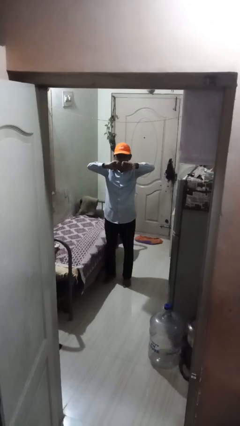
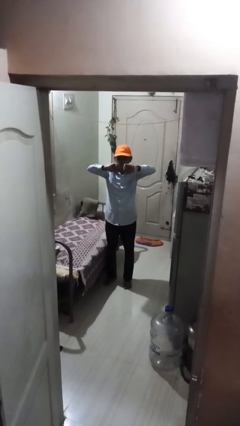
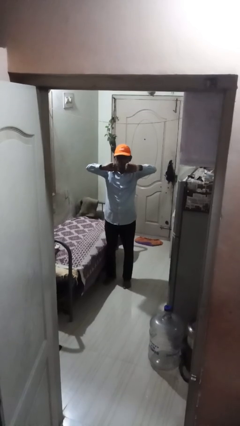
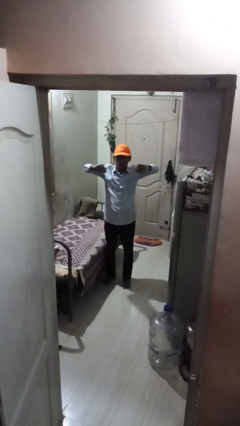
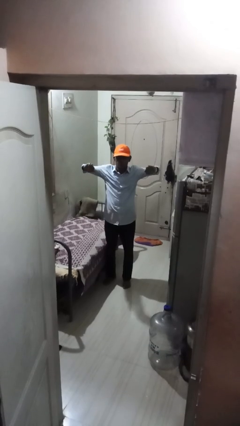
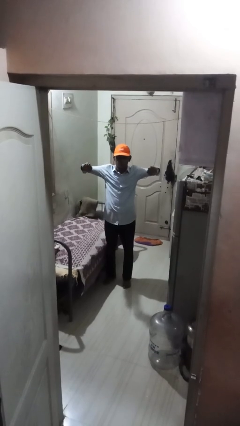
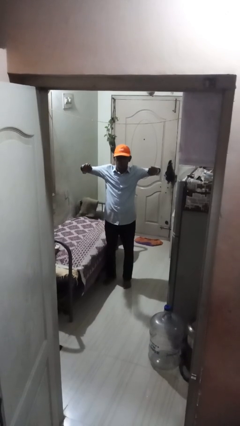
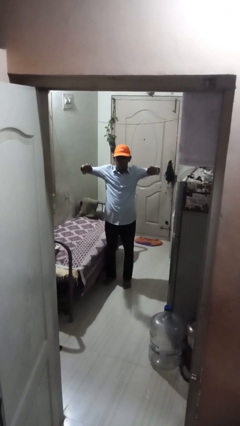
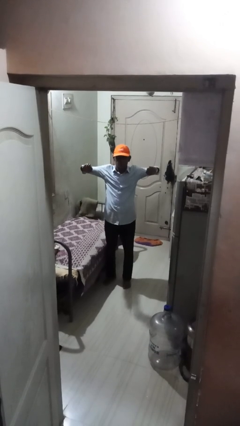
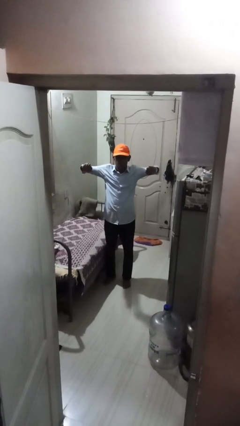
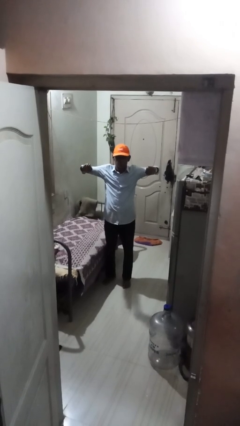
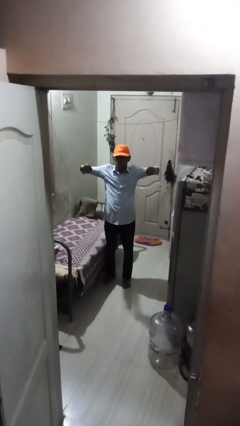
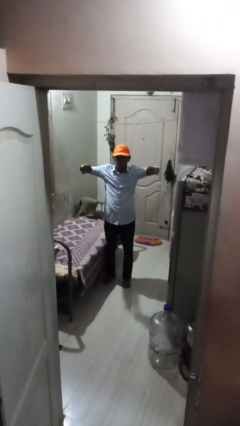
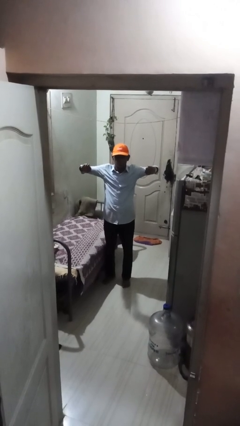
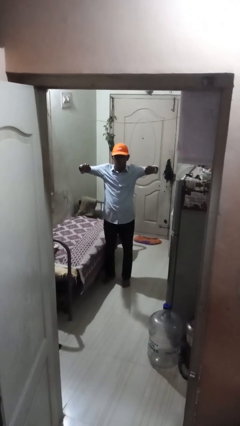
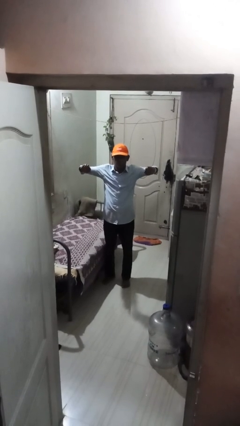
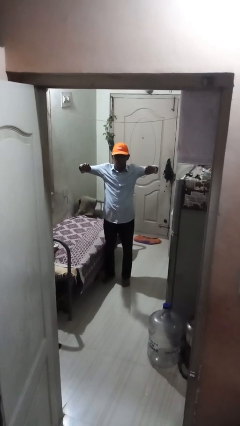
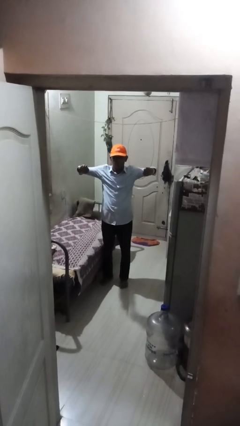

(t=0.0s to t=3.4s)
person gestures zoom out

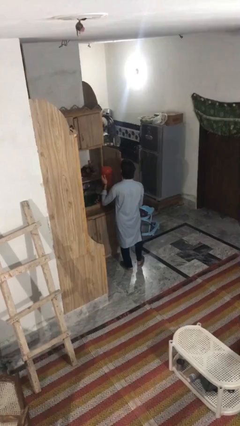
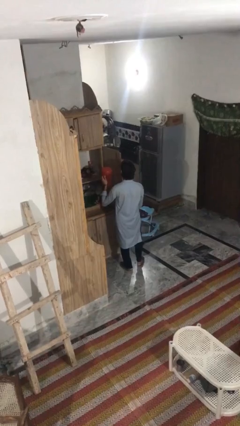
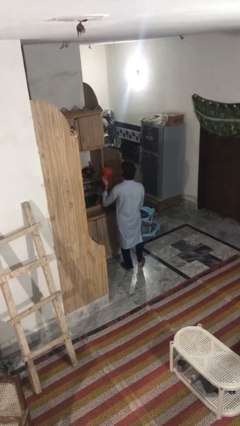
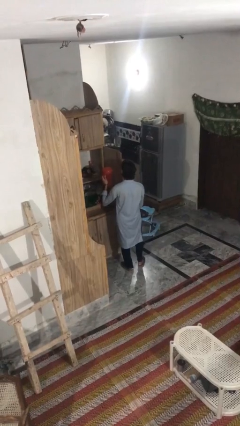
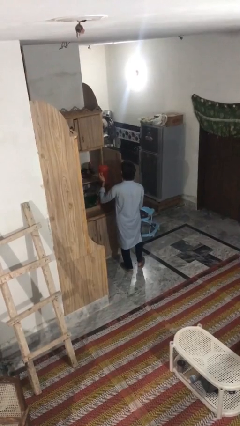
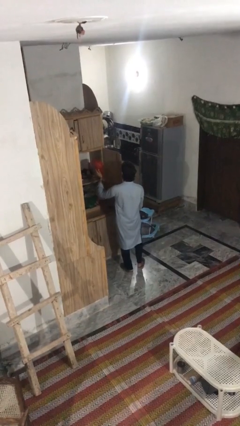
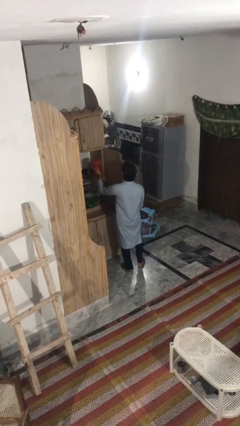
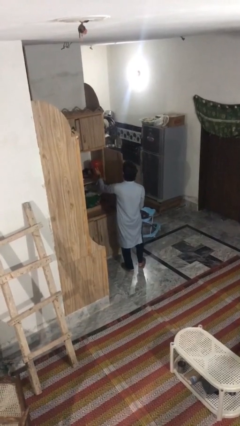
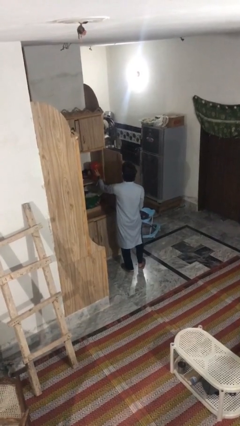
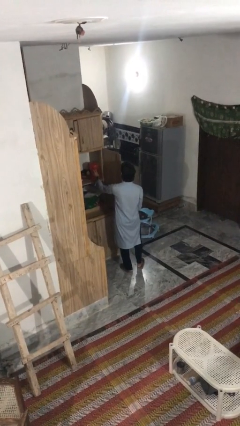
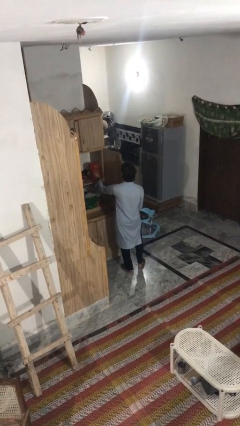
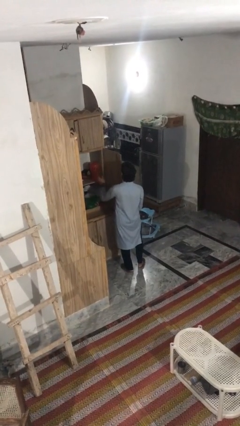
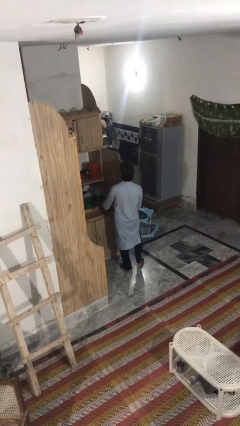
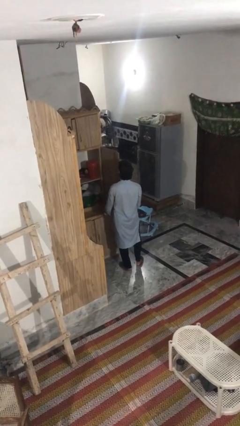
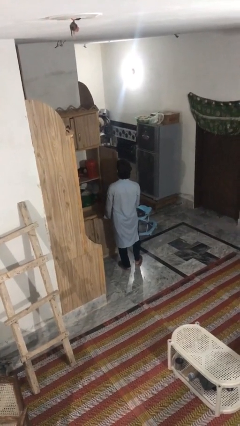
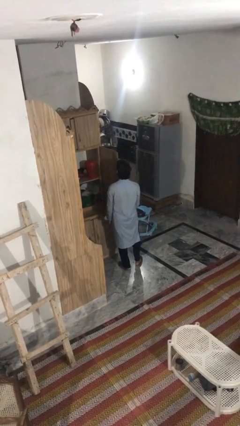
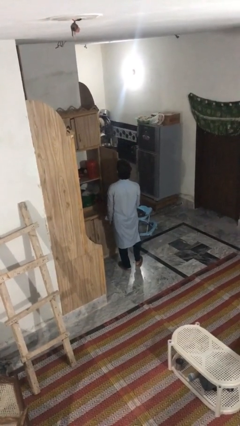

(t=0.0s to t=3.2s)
person puts down object into cabinet

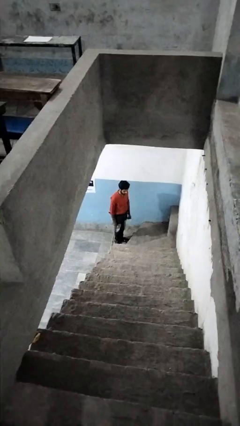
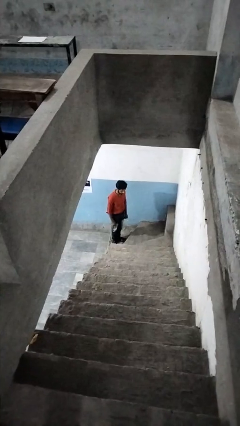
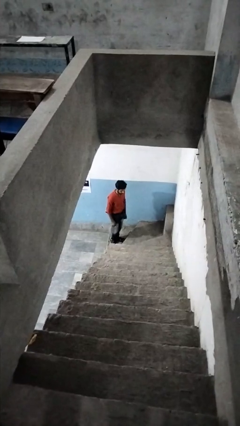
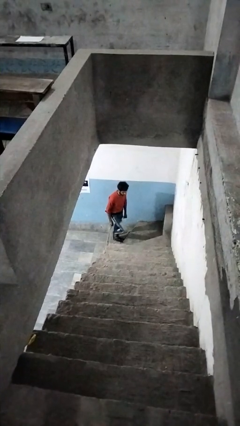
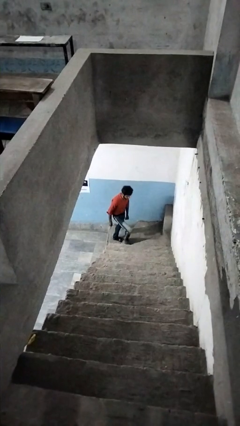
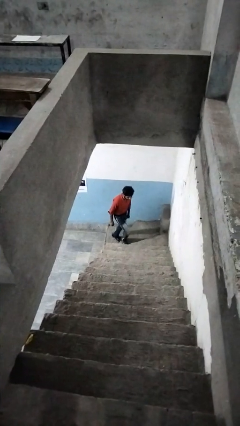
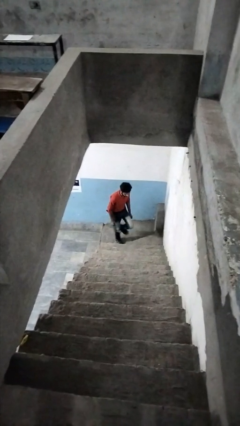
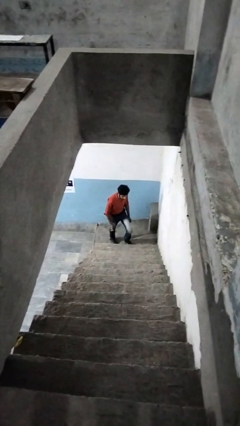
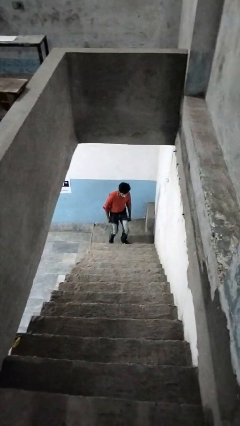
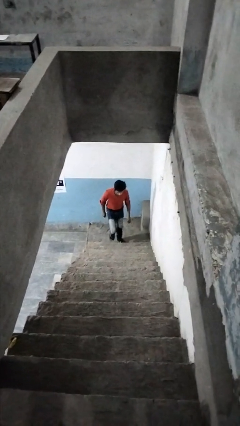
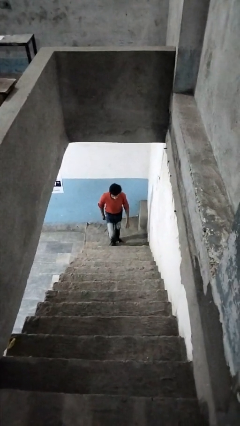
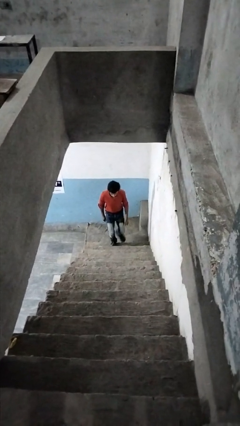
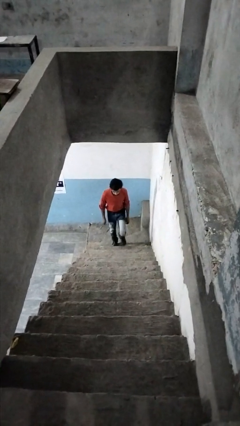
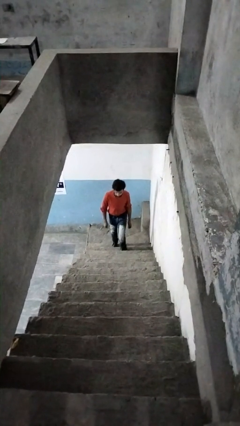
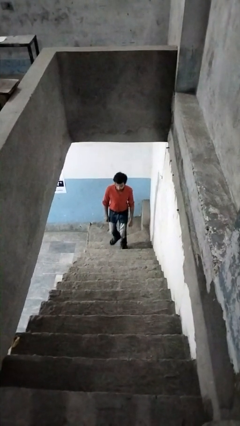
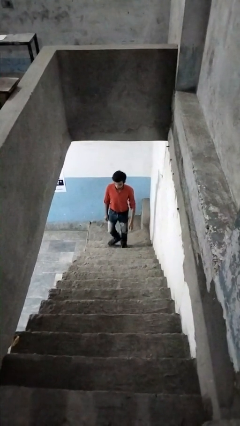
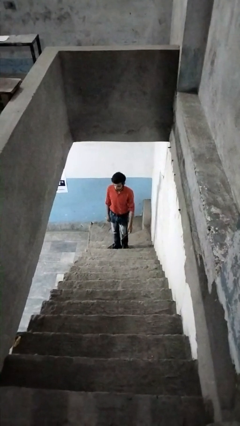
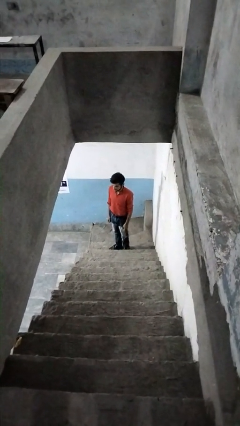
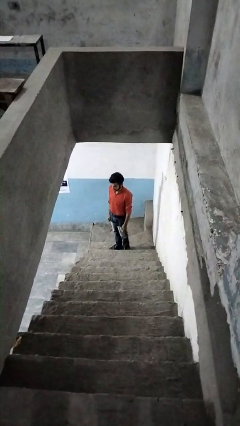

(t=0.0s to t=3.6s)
person climbs up stairs

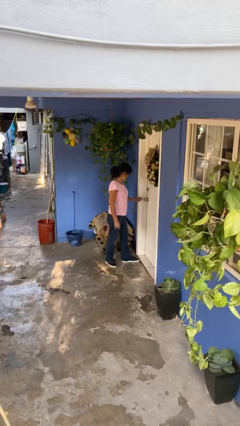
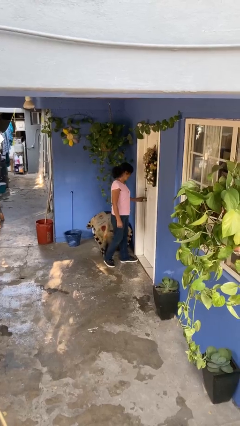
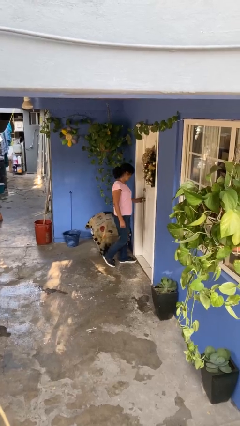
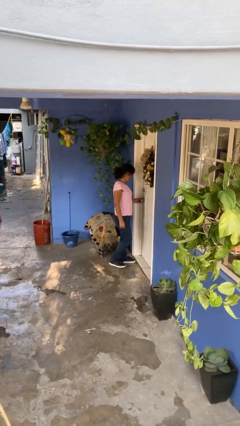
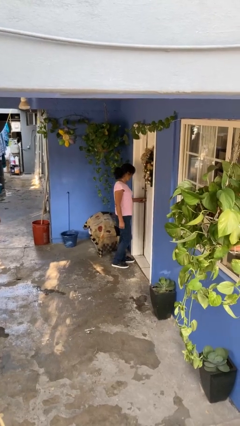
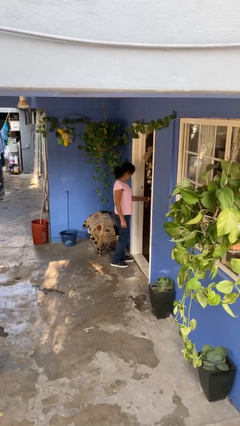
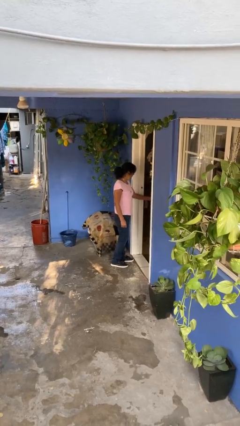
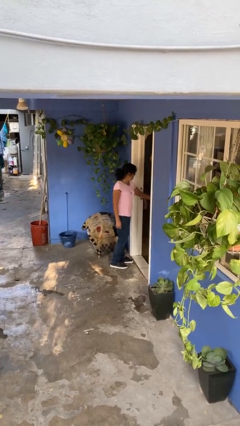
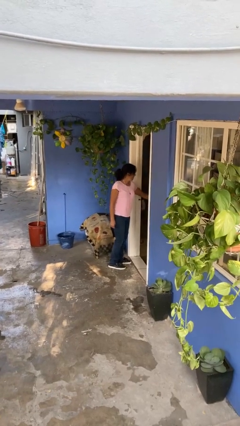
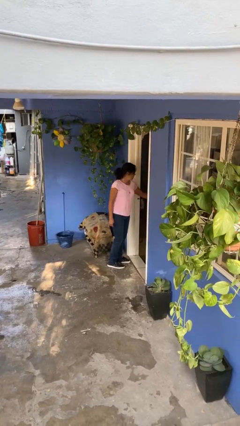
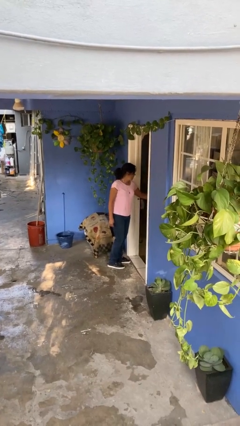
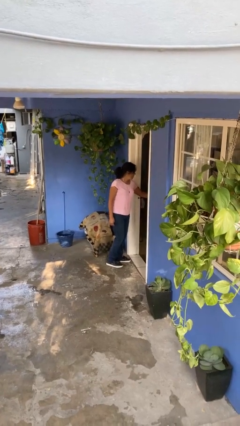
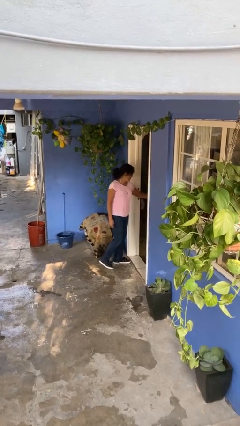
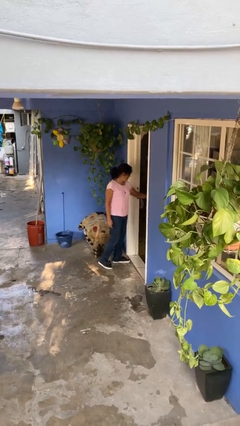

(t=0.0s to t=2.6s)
person opens facility door

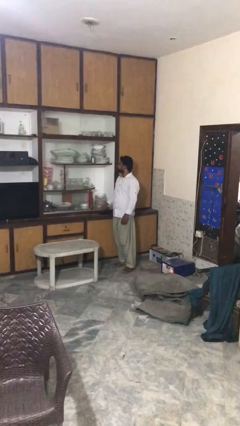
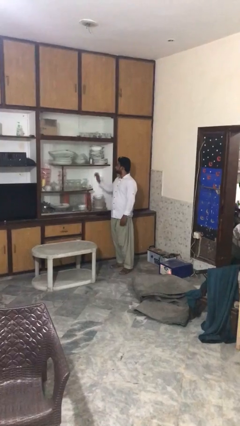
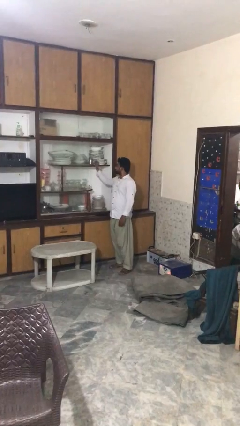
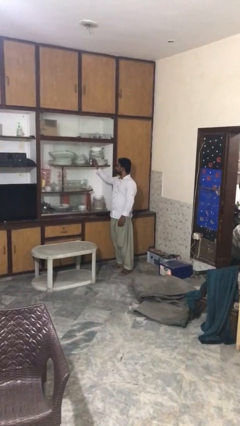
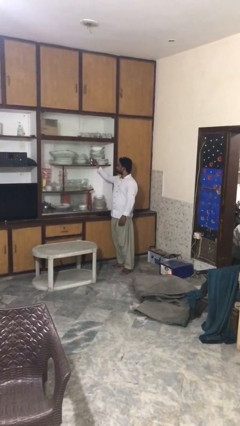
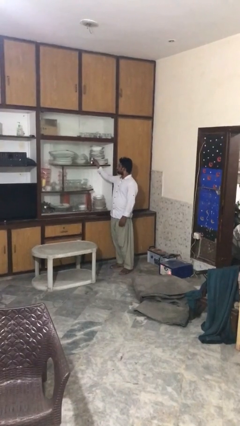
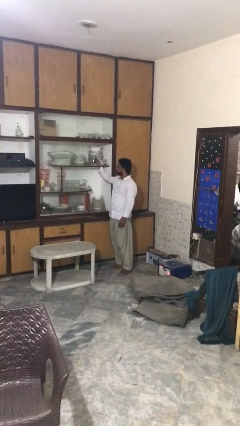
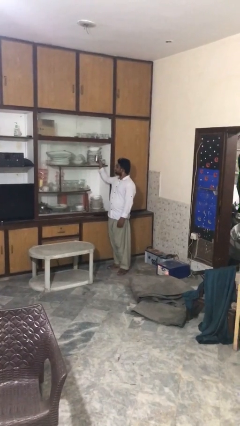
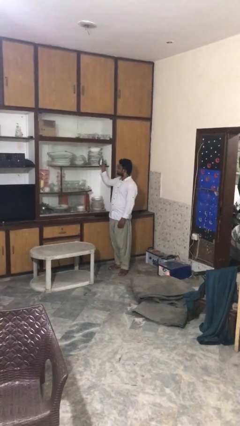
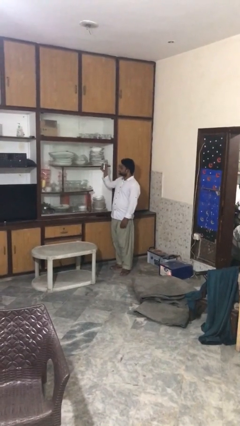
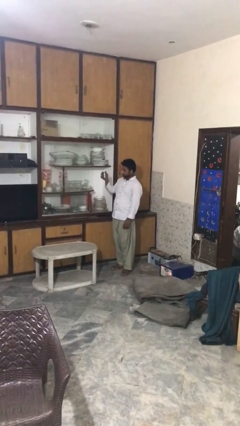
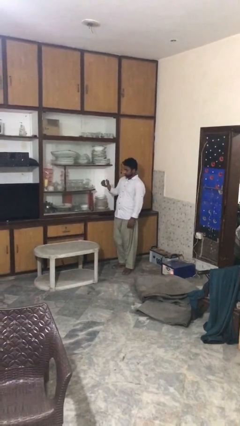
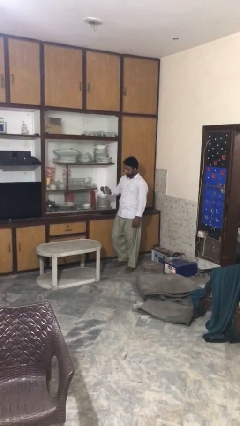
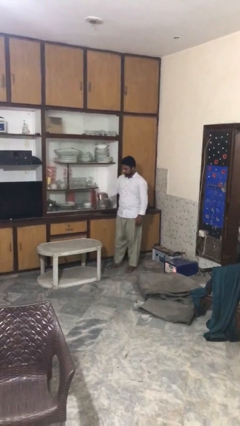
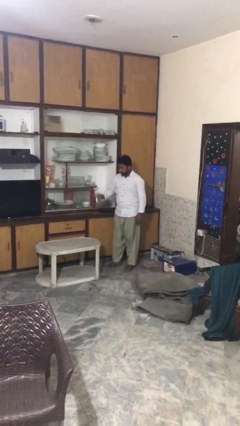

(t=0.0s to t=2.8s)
person picks up object from shelf

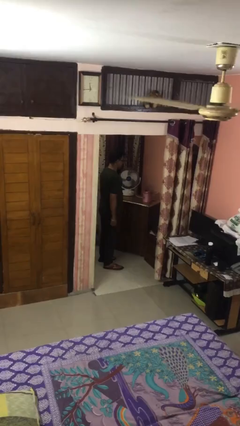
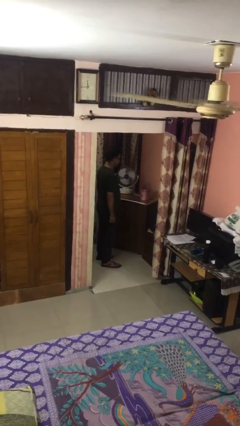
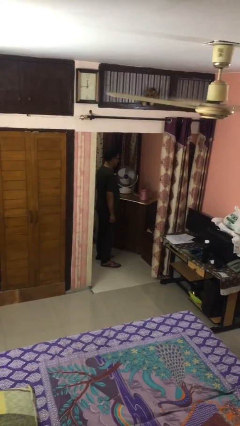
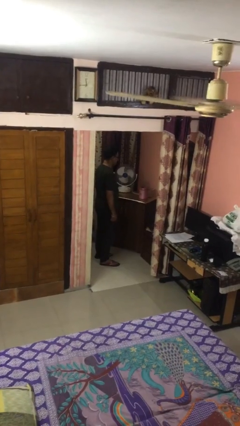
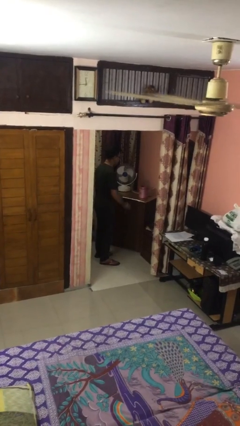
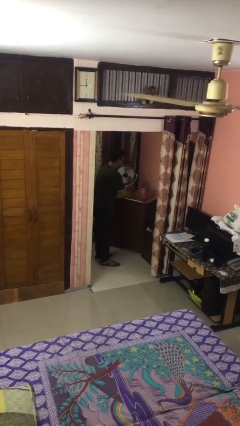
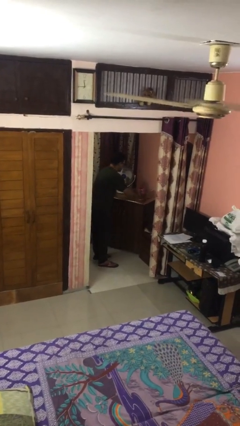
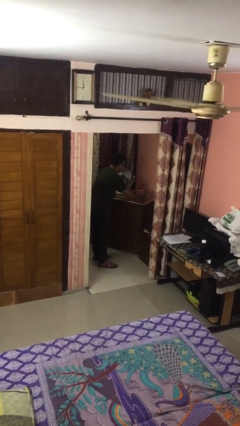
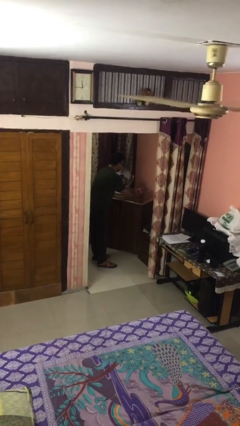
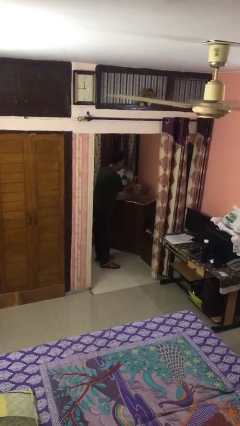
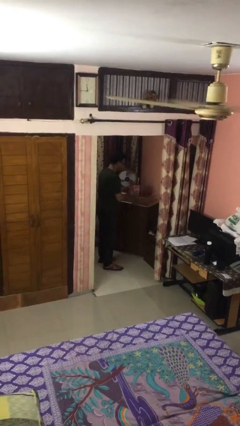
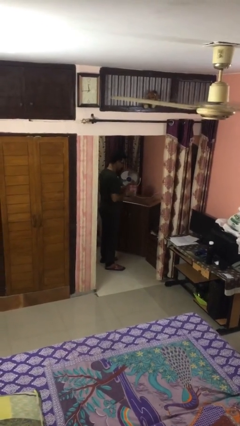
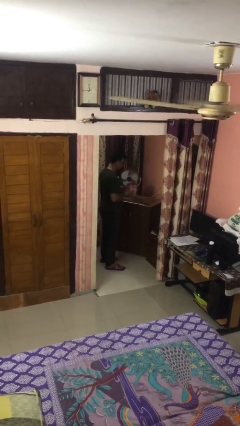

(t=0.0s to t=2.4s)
person picks up object from countertop
